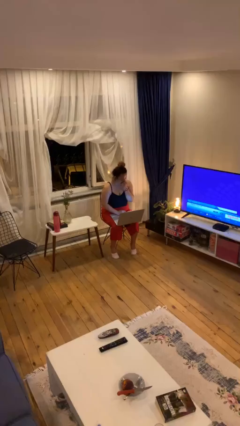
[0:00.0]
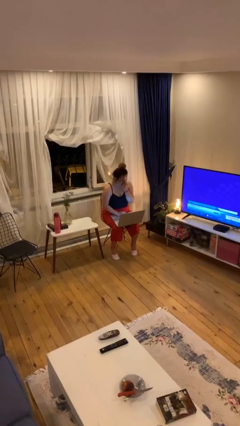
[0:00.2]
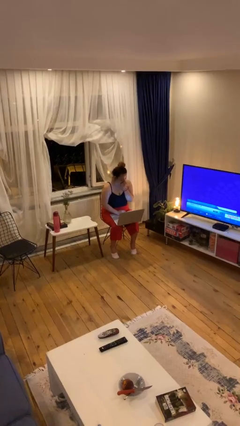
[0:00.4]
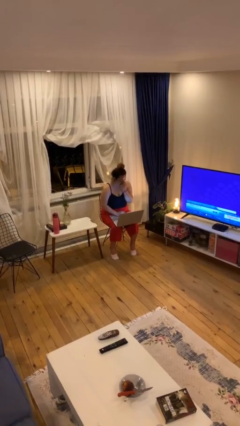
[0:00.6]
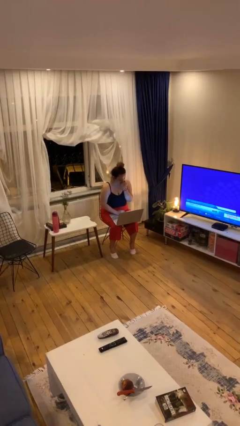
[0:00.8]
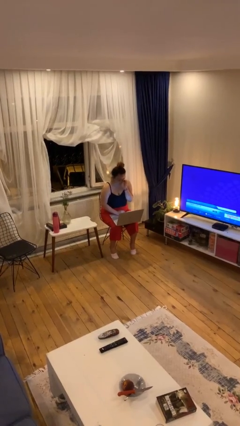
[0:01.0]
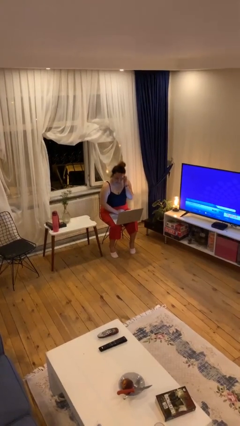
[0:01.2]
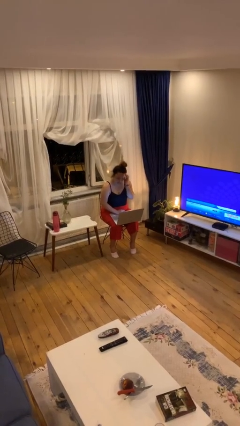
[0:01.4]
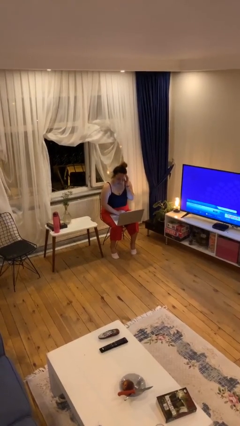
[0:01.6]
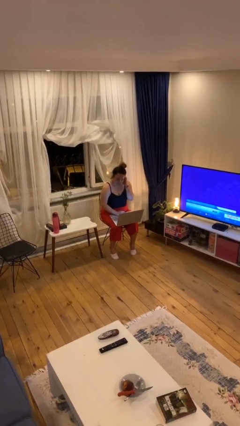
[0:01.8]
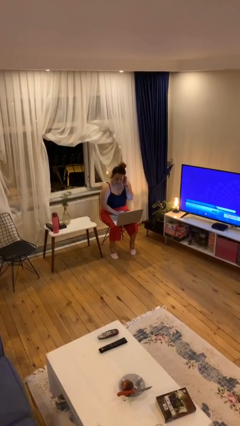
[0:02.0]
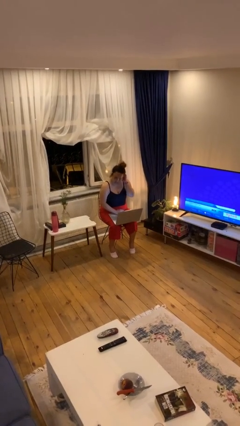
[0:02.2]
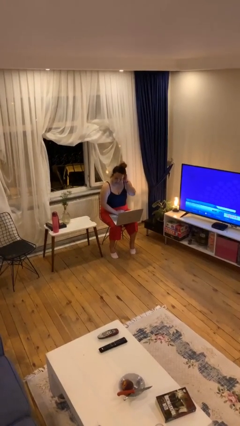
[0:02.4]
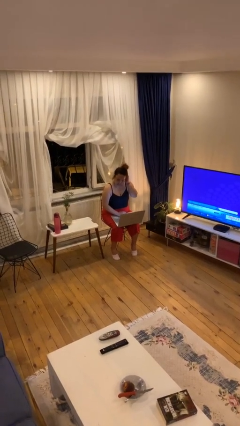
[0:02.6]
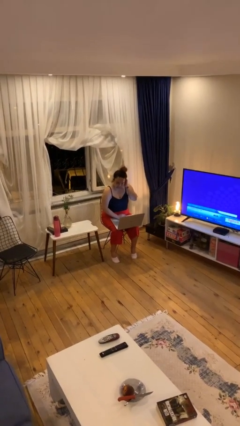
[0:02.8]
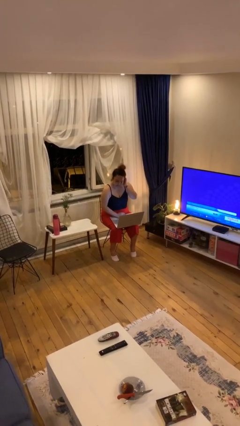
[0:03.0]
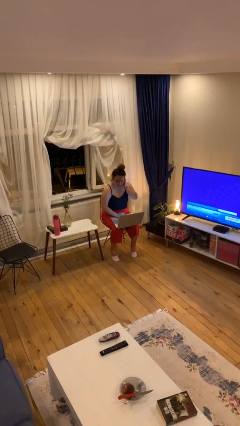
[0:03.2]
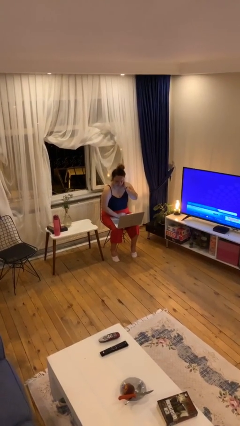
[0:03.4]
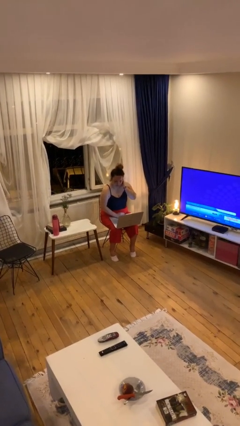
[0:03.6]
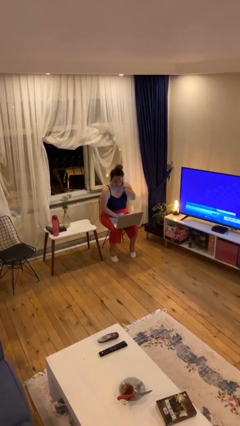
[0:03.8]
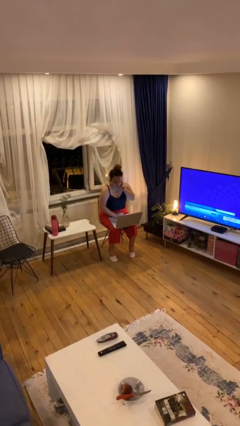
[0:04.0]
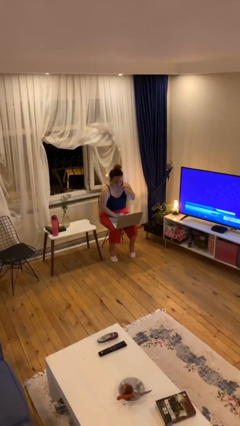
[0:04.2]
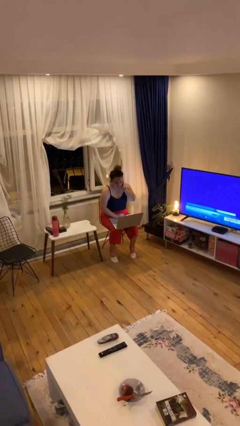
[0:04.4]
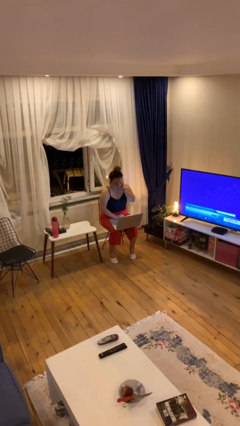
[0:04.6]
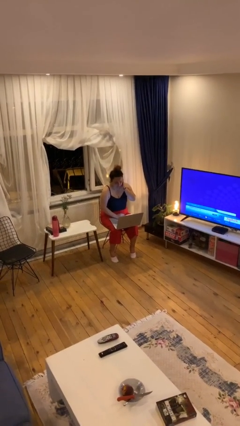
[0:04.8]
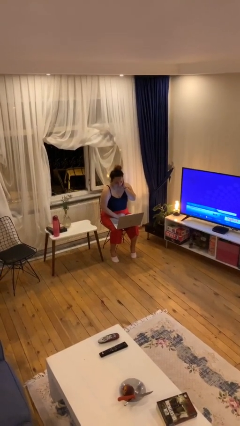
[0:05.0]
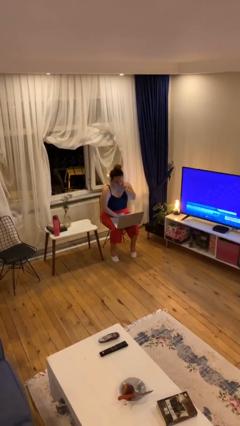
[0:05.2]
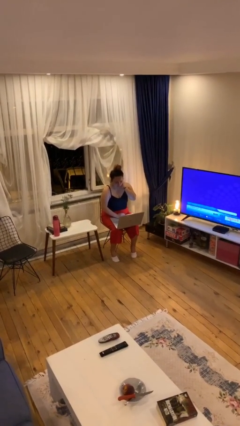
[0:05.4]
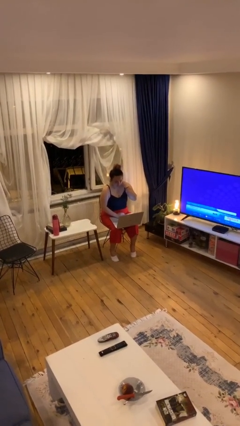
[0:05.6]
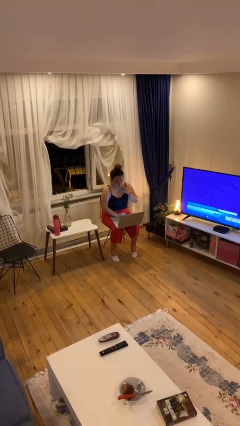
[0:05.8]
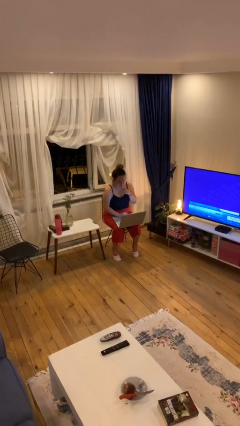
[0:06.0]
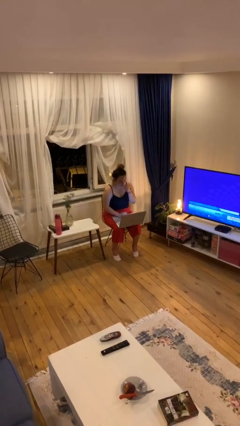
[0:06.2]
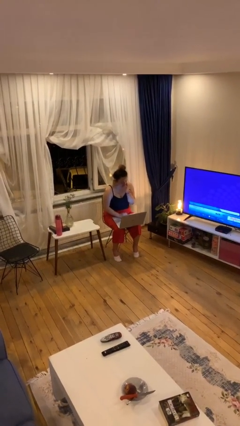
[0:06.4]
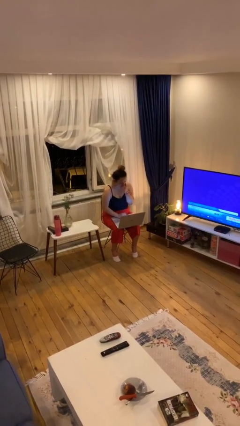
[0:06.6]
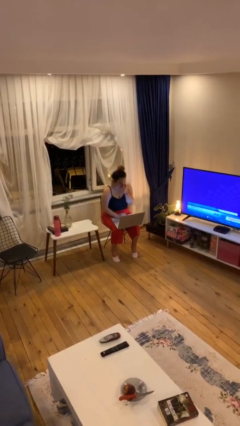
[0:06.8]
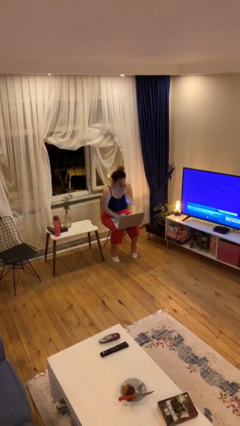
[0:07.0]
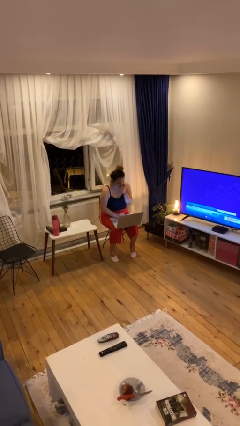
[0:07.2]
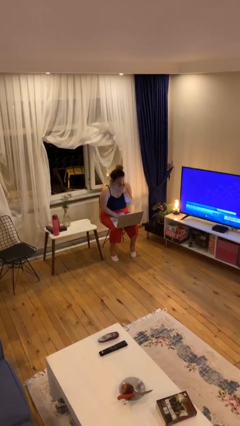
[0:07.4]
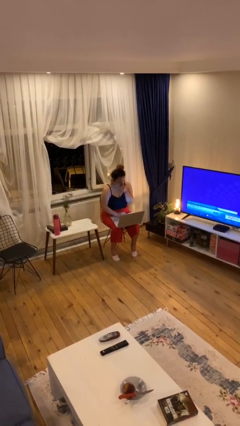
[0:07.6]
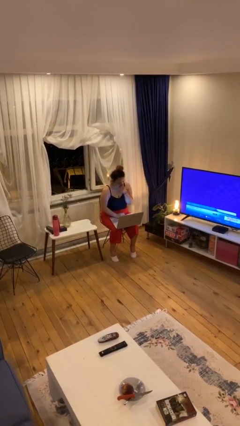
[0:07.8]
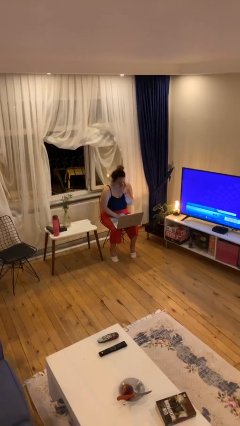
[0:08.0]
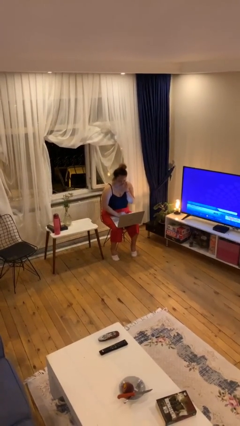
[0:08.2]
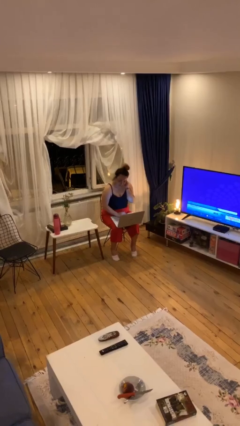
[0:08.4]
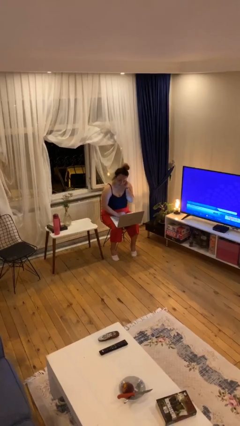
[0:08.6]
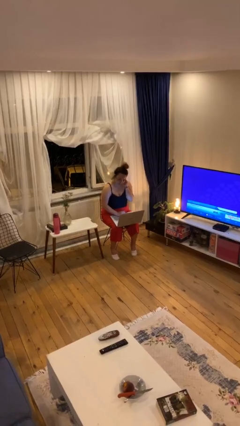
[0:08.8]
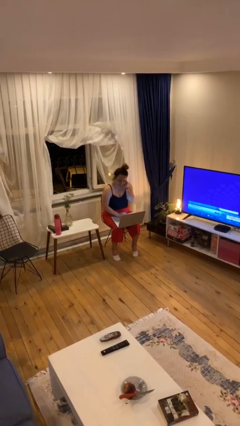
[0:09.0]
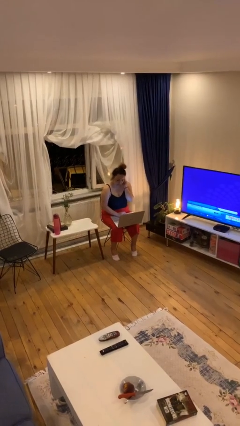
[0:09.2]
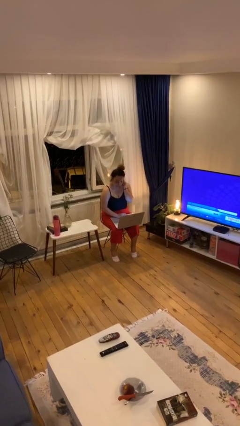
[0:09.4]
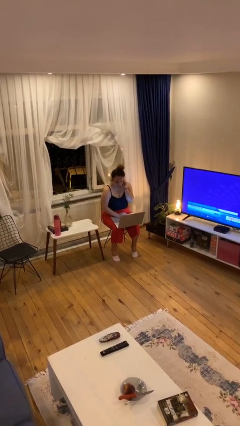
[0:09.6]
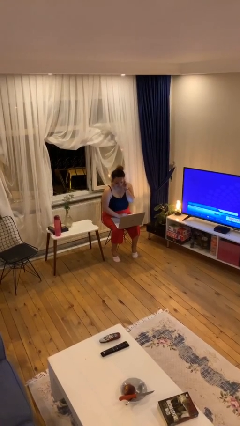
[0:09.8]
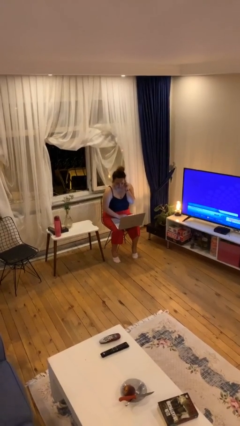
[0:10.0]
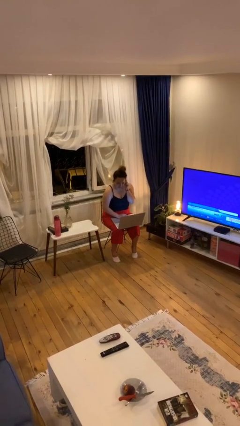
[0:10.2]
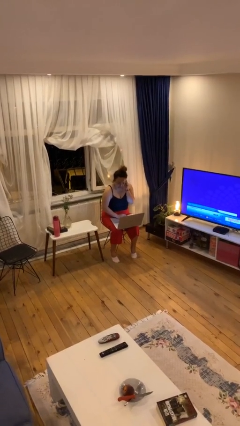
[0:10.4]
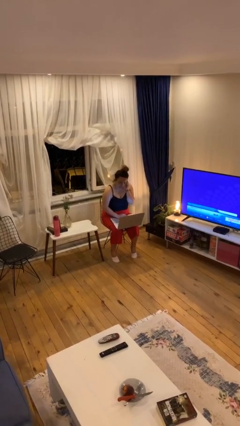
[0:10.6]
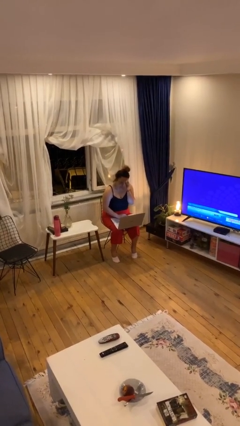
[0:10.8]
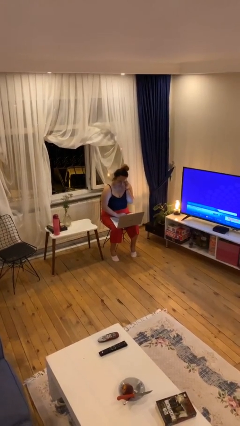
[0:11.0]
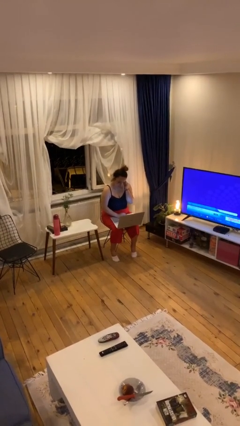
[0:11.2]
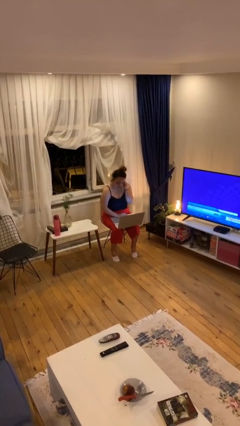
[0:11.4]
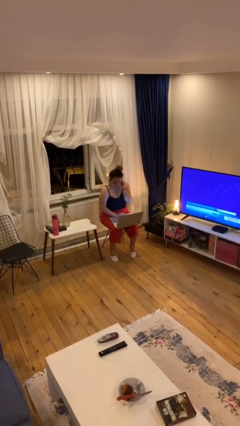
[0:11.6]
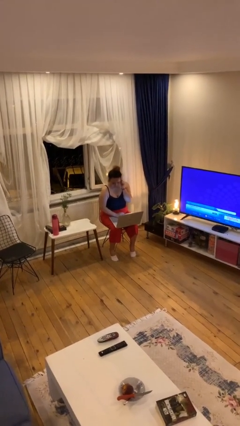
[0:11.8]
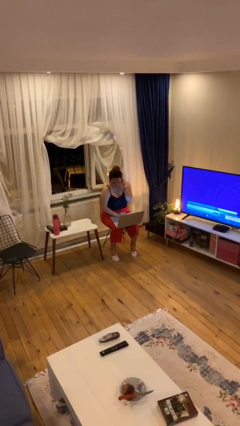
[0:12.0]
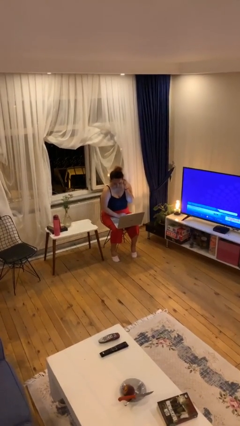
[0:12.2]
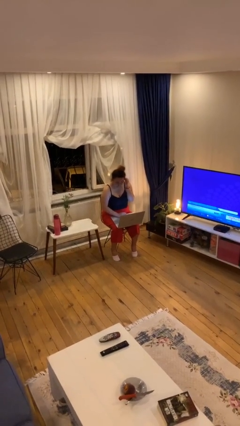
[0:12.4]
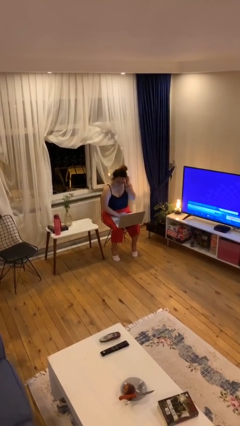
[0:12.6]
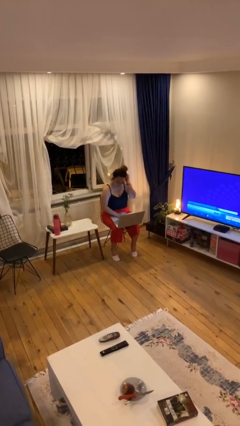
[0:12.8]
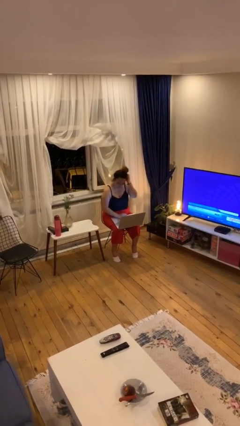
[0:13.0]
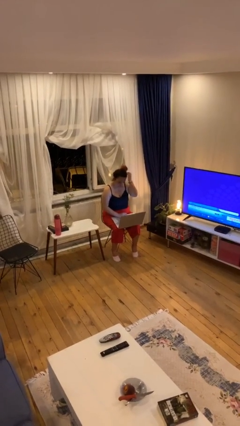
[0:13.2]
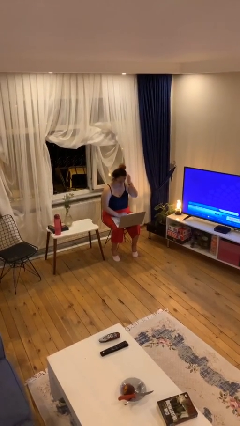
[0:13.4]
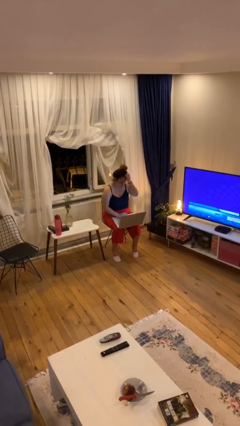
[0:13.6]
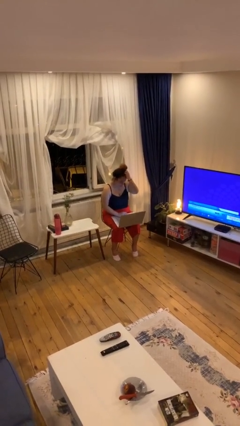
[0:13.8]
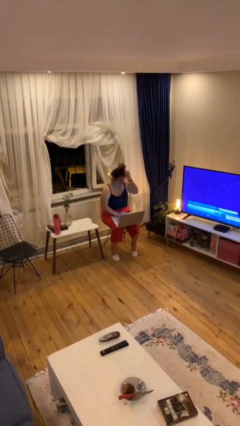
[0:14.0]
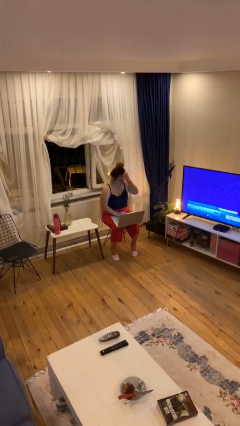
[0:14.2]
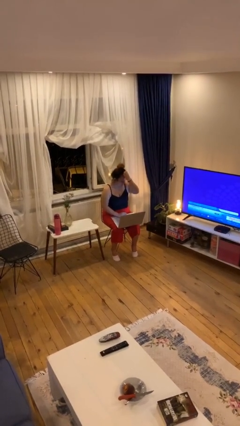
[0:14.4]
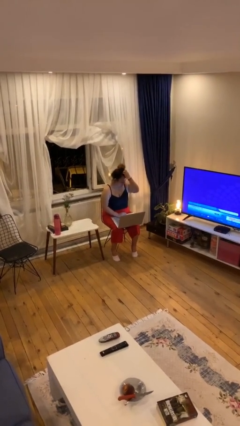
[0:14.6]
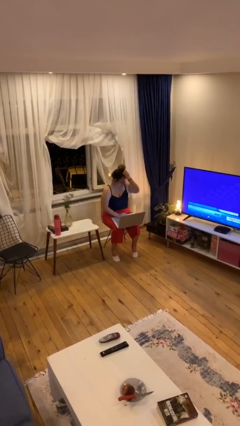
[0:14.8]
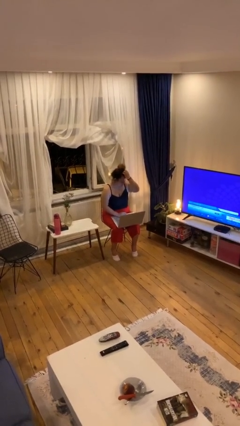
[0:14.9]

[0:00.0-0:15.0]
person interacts with laptop

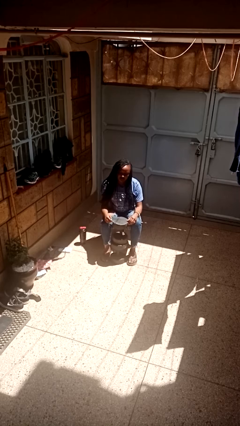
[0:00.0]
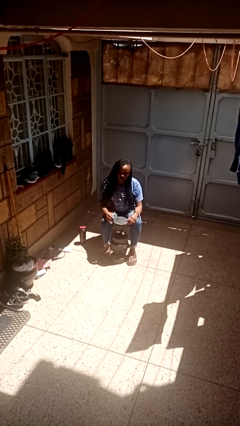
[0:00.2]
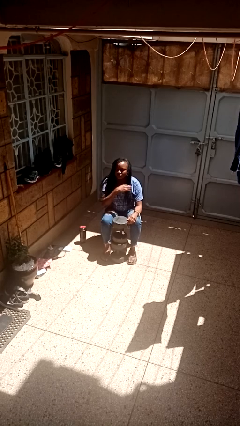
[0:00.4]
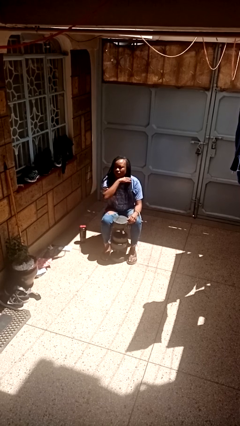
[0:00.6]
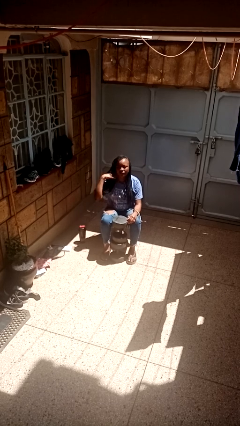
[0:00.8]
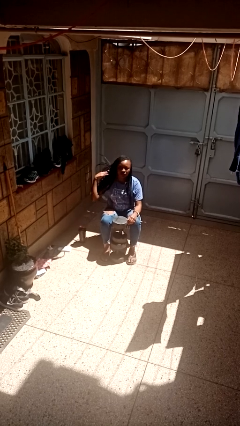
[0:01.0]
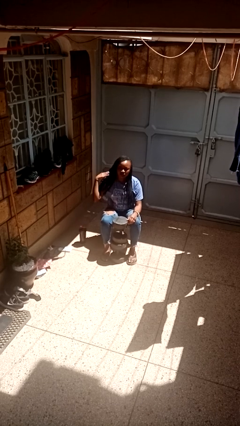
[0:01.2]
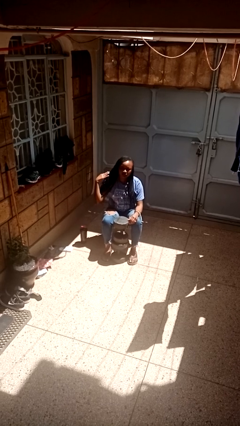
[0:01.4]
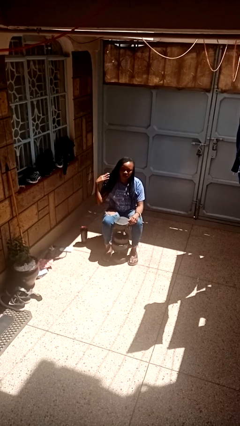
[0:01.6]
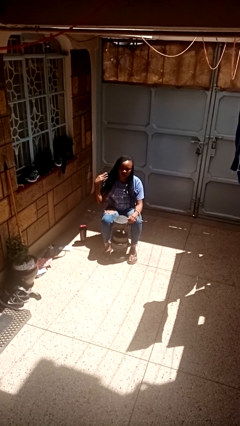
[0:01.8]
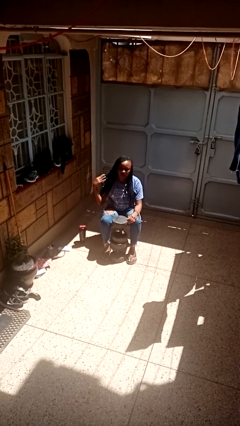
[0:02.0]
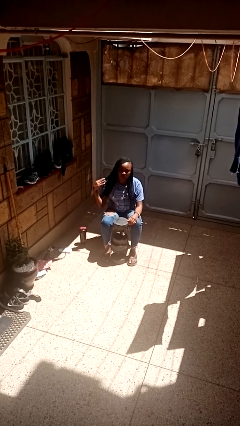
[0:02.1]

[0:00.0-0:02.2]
person gestures cut

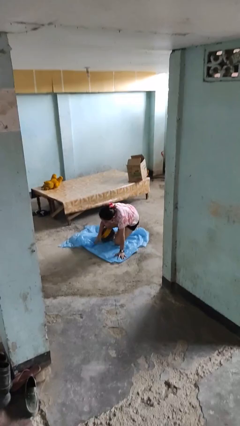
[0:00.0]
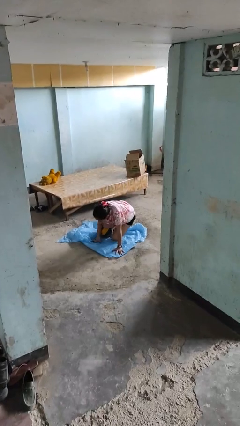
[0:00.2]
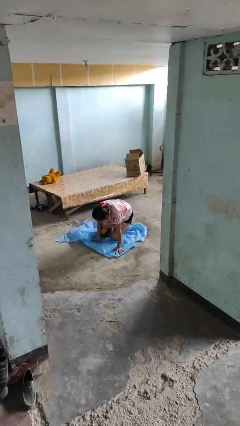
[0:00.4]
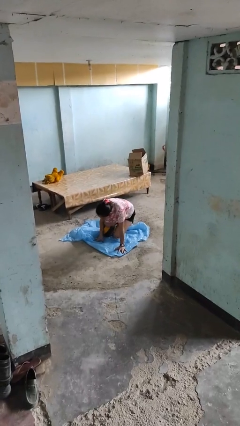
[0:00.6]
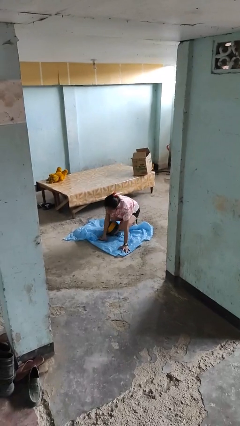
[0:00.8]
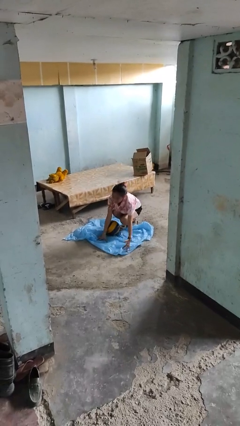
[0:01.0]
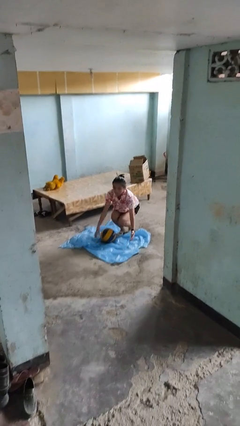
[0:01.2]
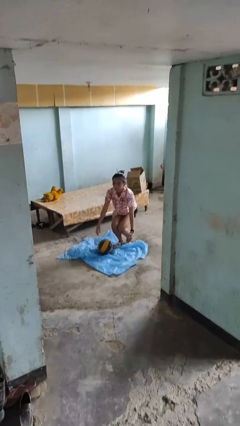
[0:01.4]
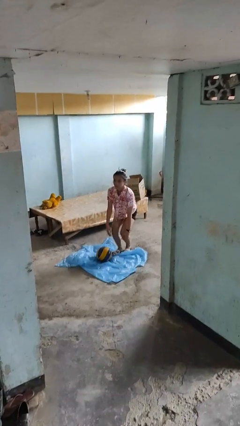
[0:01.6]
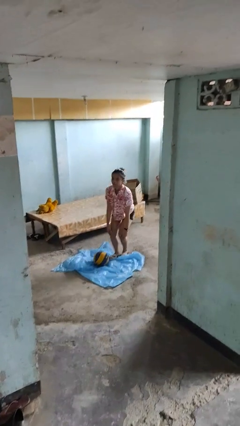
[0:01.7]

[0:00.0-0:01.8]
person lies down on floor
